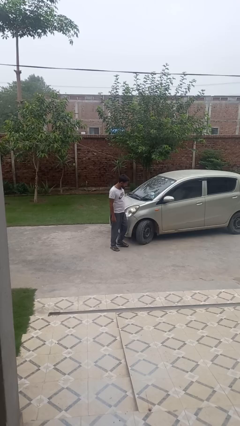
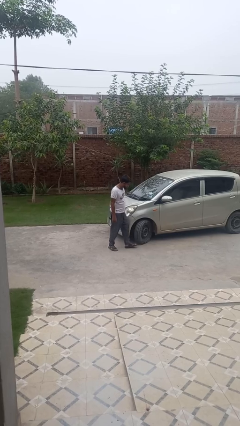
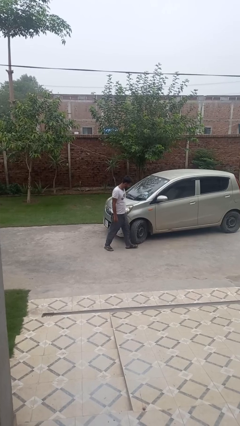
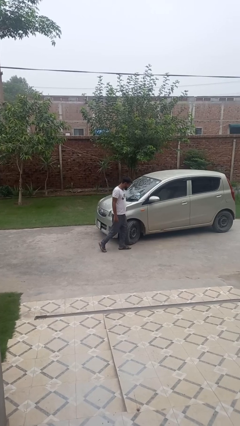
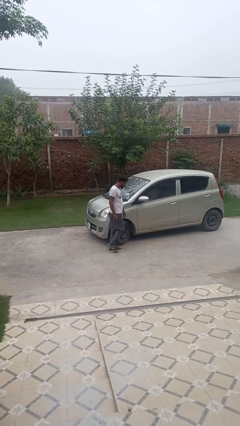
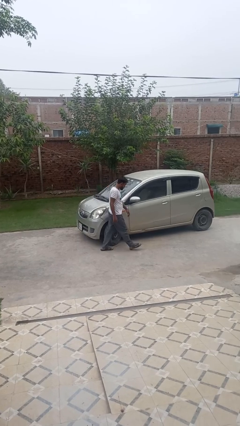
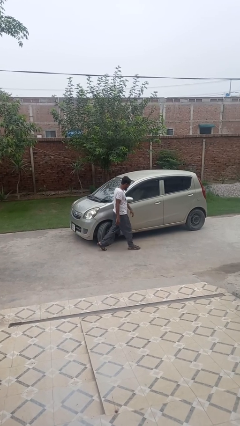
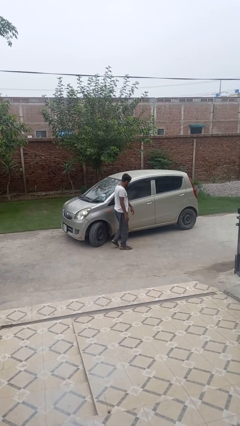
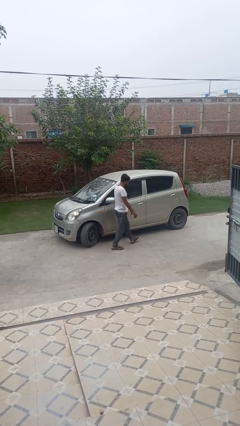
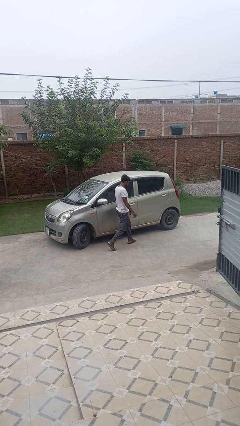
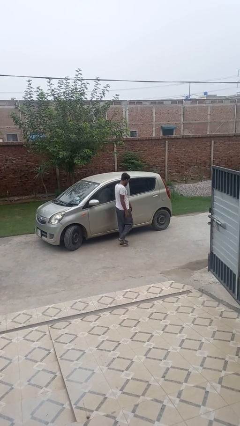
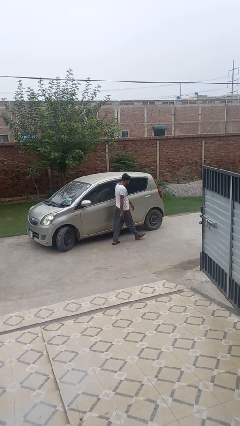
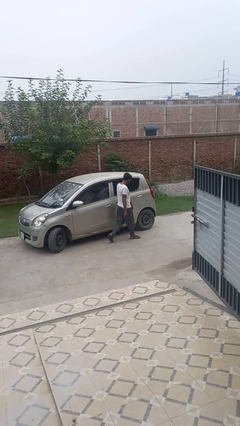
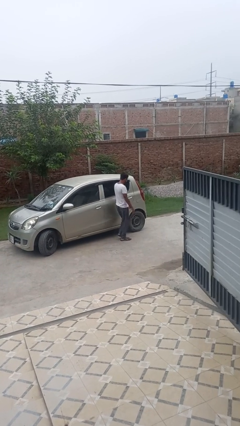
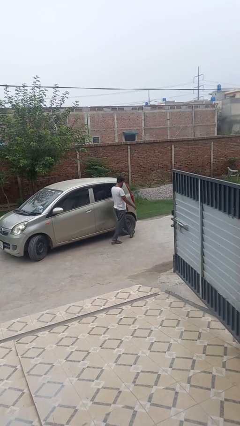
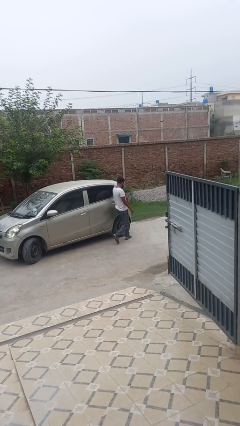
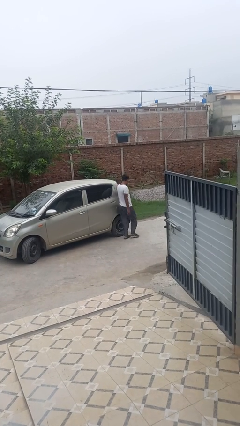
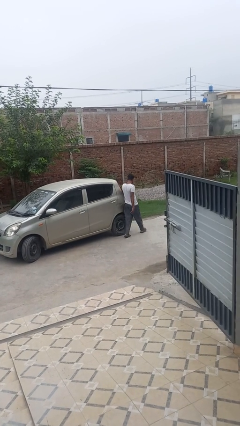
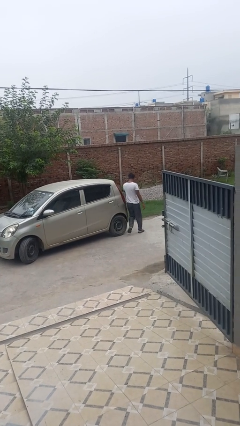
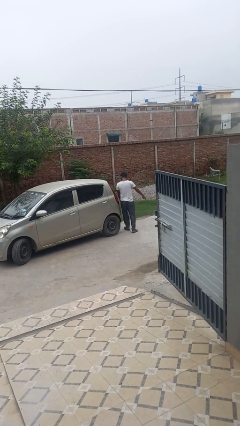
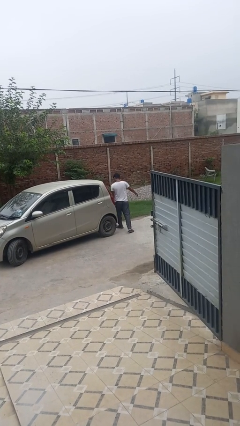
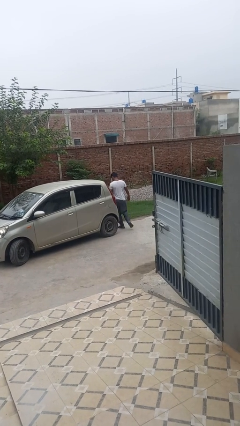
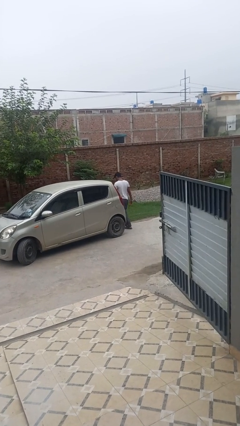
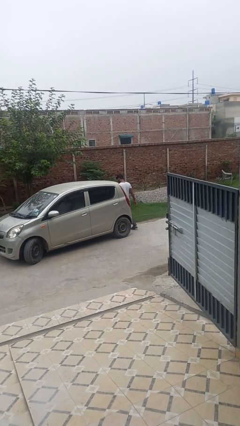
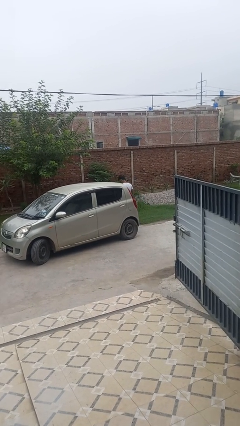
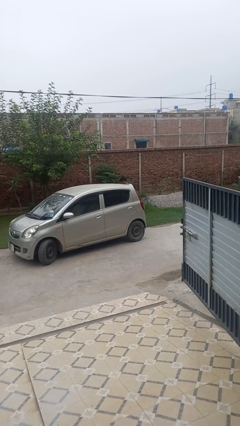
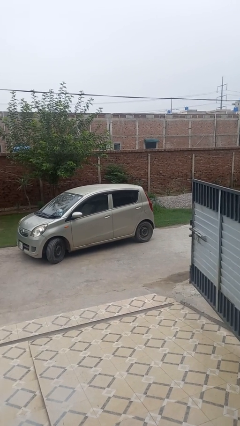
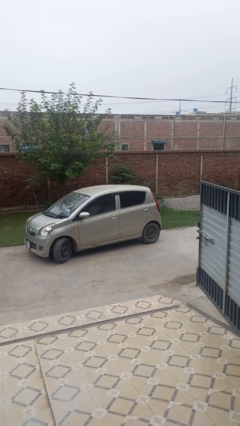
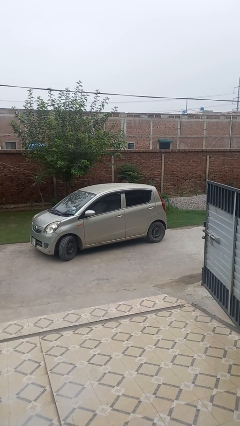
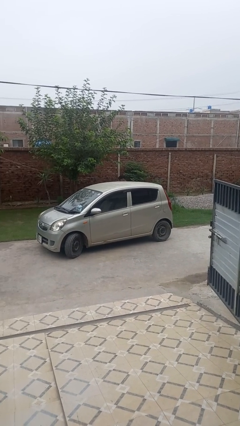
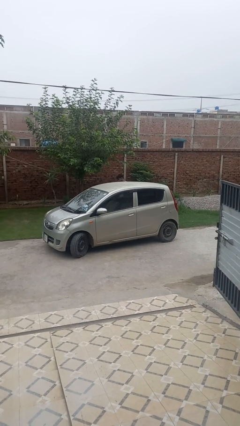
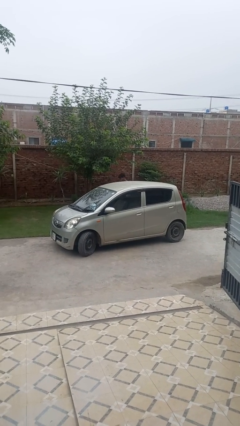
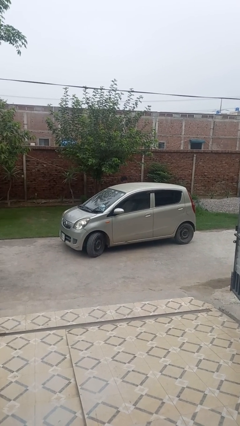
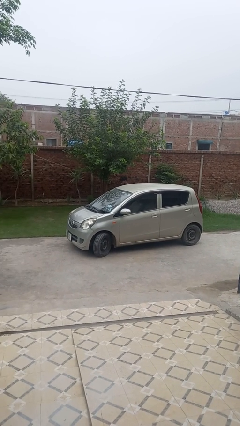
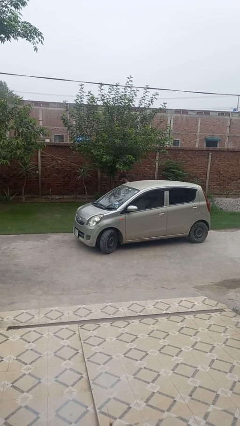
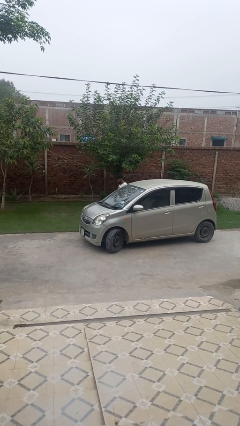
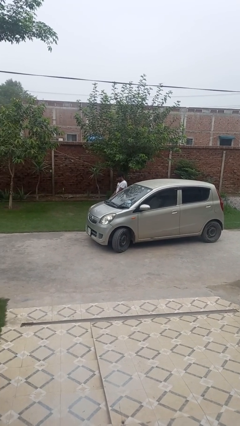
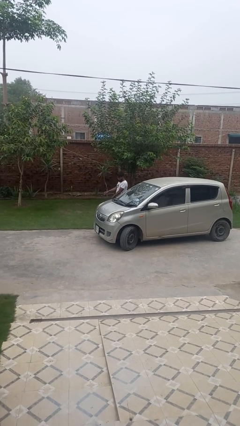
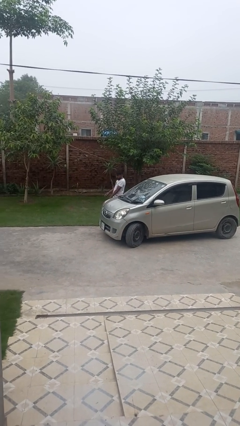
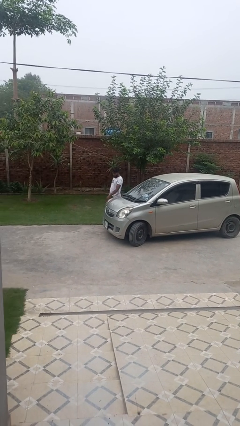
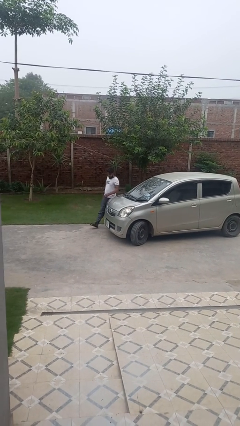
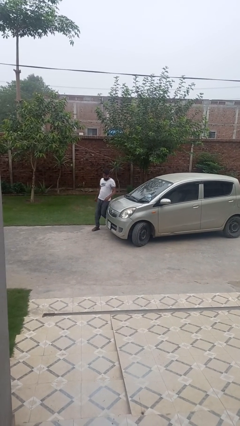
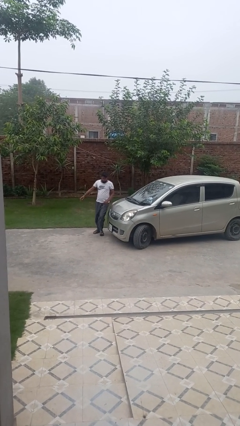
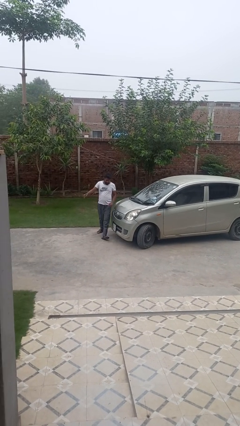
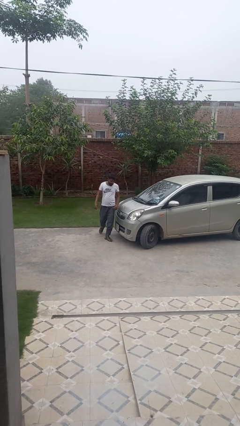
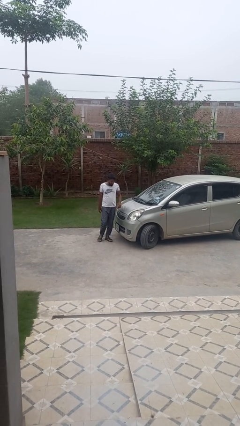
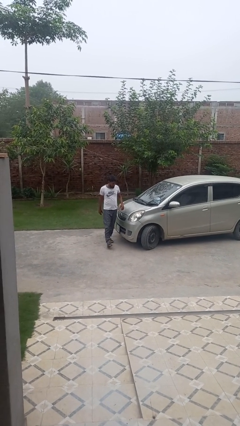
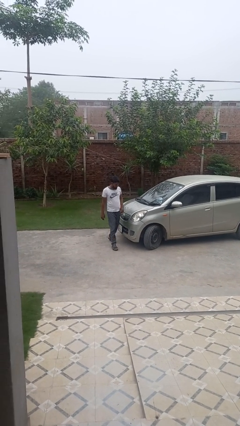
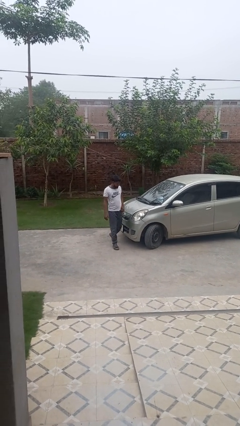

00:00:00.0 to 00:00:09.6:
person walks around car

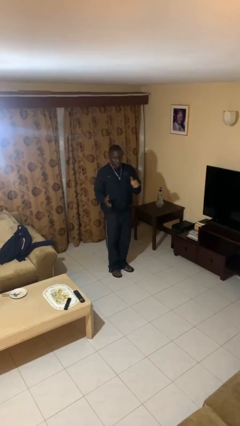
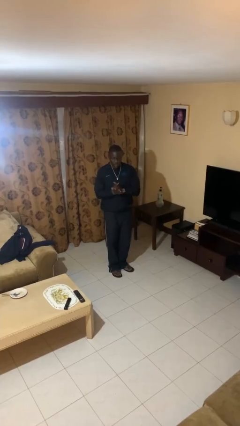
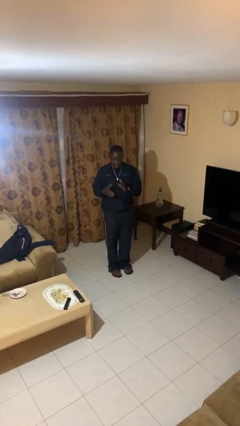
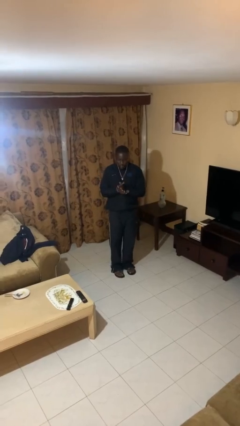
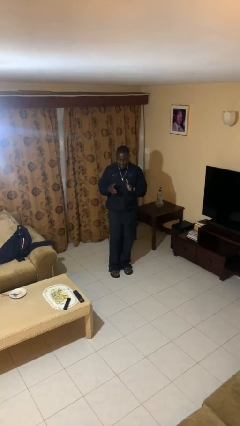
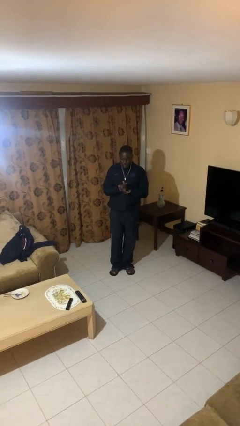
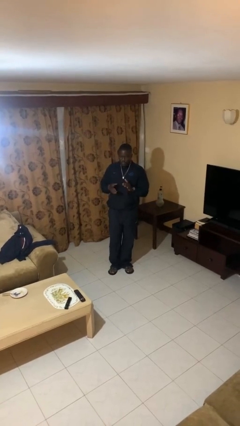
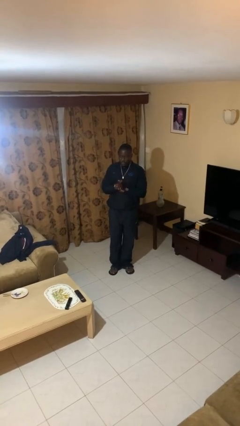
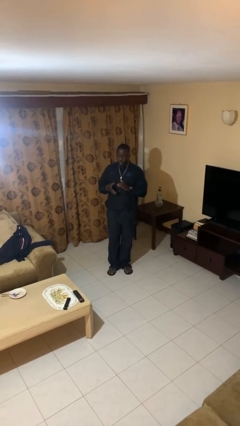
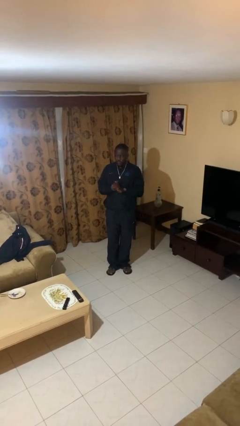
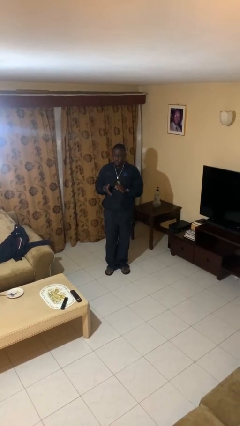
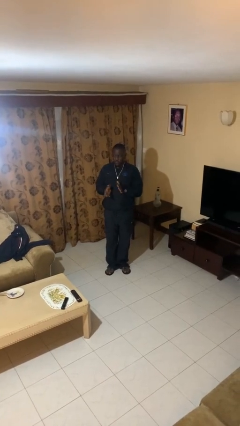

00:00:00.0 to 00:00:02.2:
person claps hands

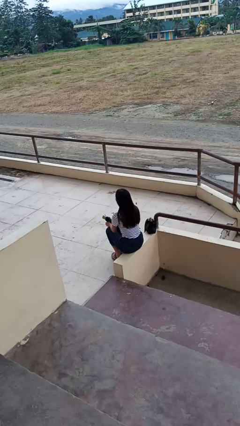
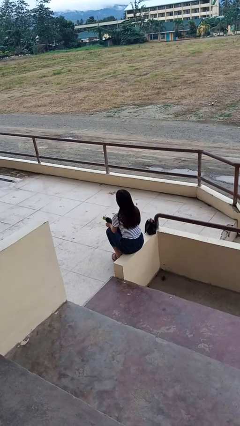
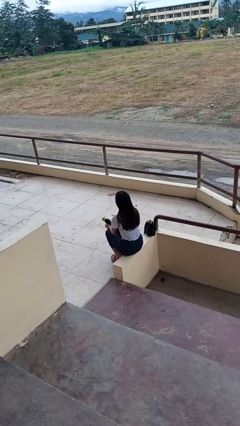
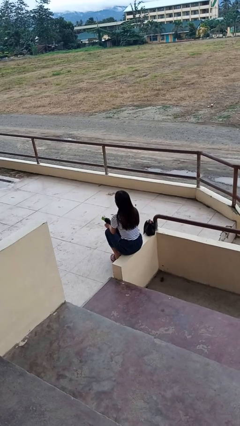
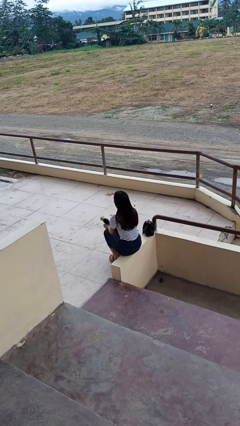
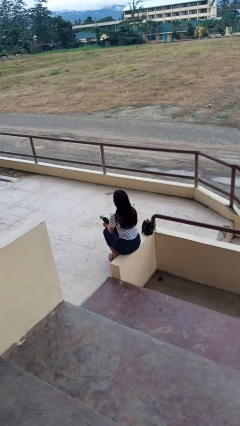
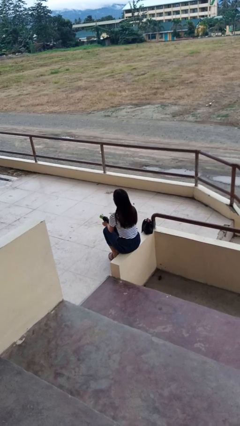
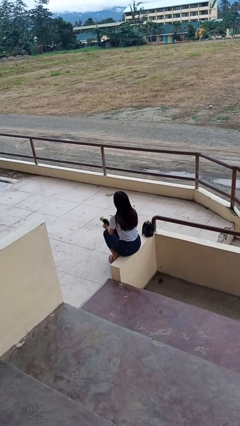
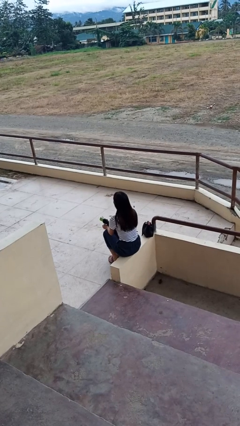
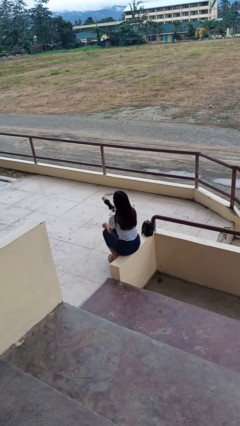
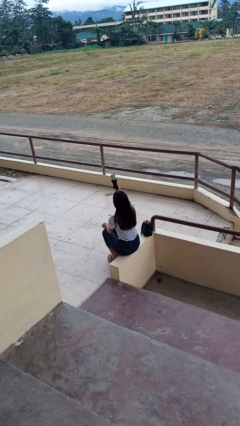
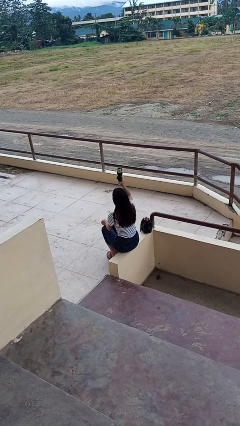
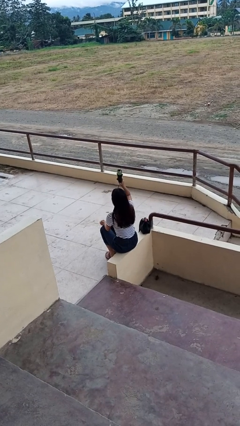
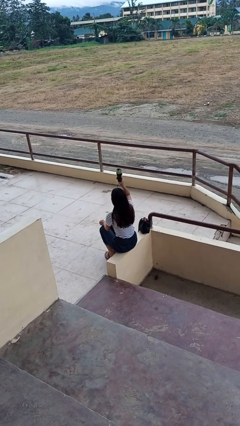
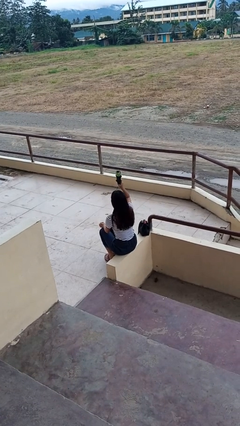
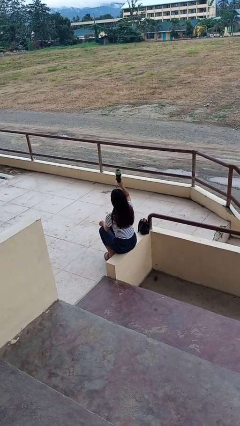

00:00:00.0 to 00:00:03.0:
person holds object above head

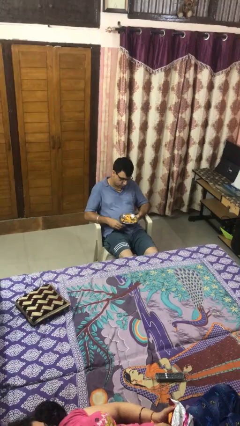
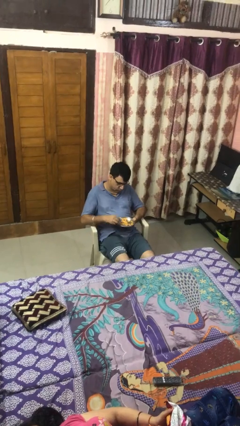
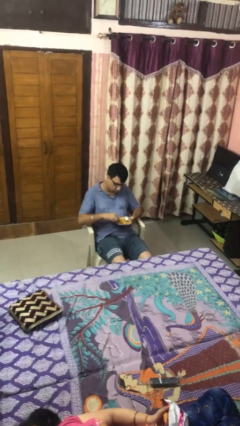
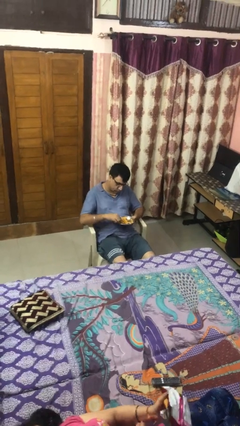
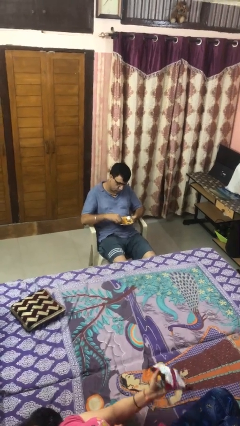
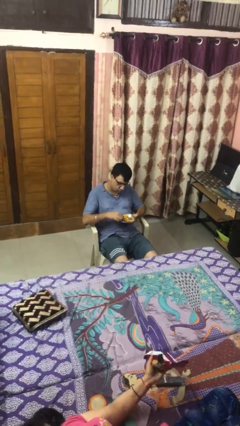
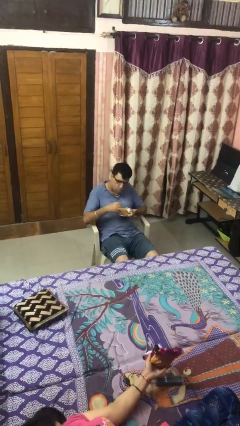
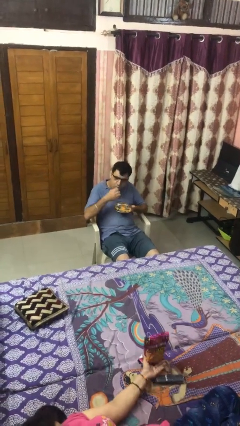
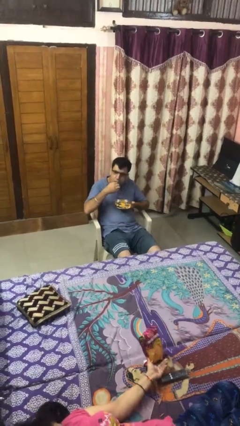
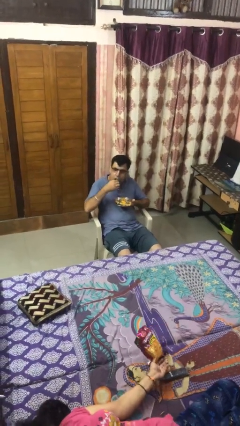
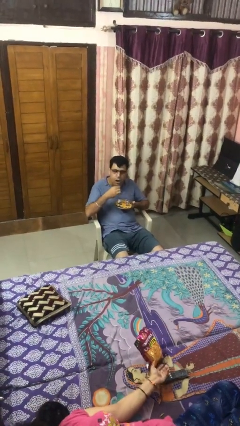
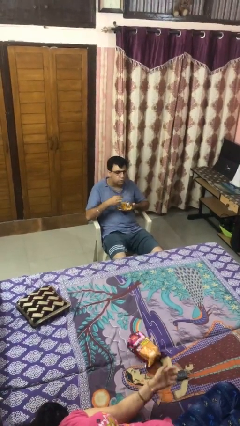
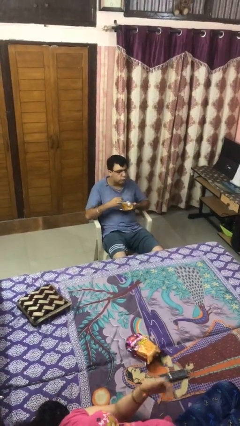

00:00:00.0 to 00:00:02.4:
person eats with hands

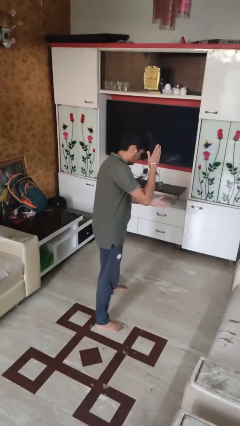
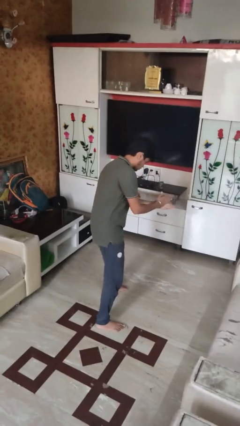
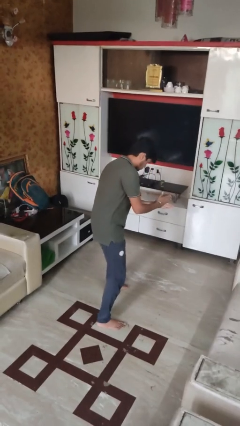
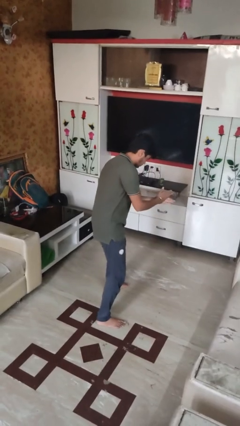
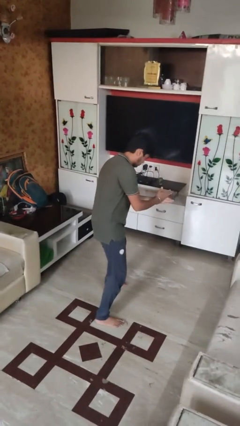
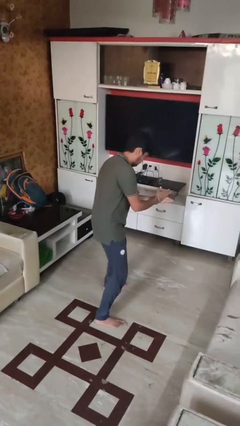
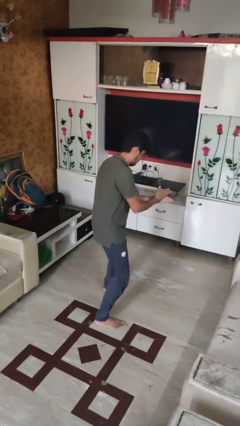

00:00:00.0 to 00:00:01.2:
person karate chop
